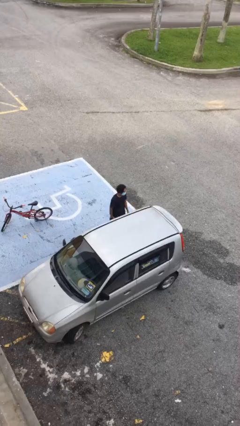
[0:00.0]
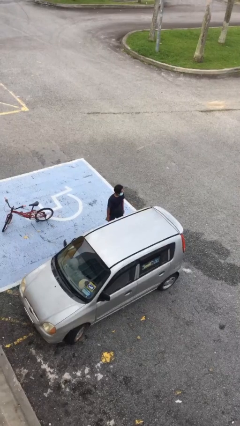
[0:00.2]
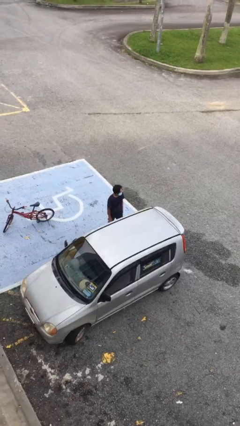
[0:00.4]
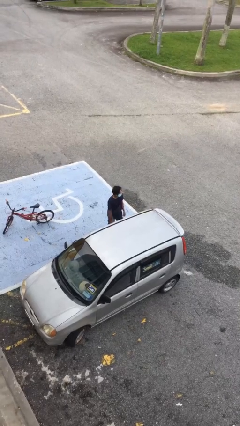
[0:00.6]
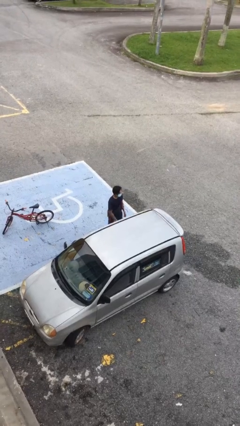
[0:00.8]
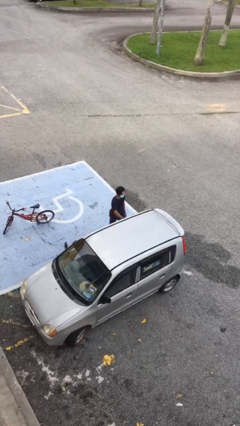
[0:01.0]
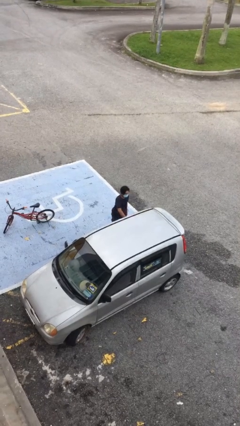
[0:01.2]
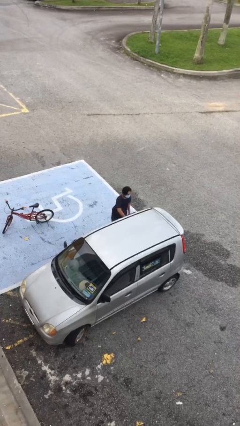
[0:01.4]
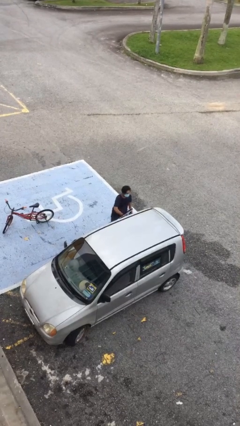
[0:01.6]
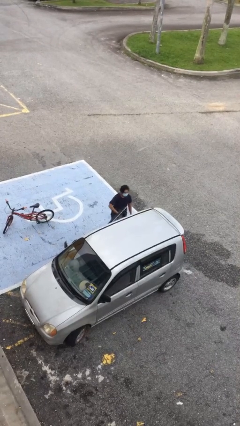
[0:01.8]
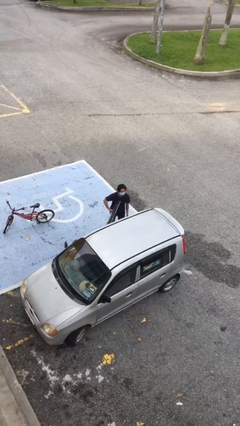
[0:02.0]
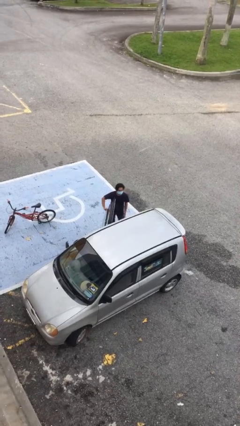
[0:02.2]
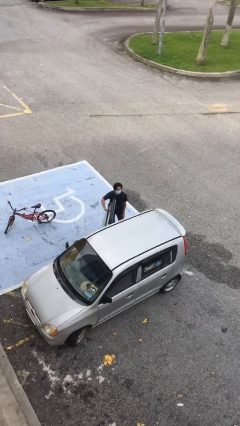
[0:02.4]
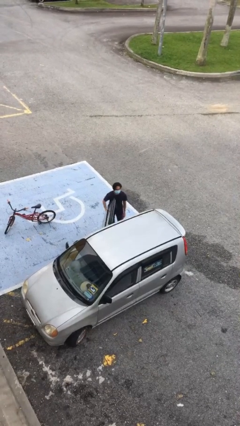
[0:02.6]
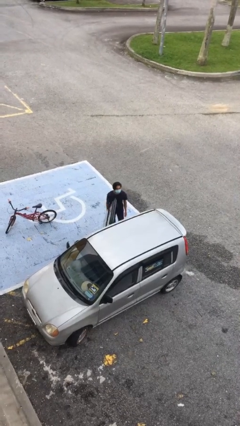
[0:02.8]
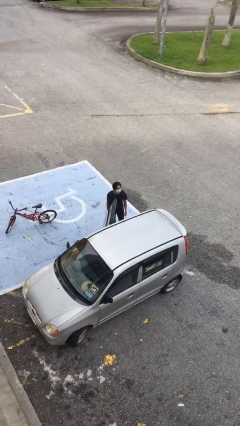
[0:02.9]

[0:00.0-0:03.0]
person opens car door

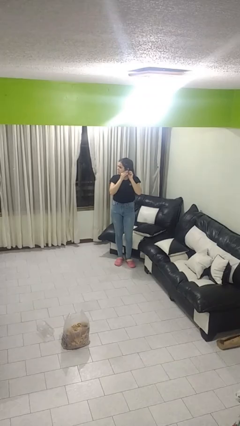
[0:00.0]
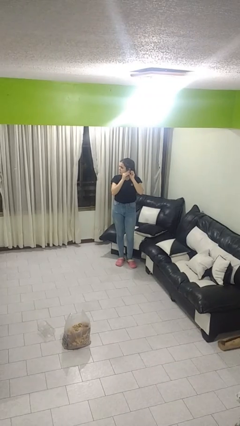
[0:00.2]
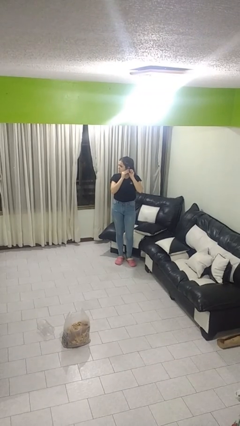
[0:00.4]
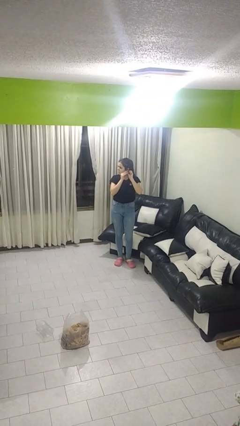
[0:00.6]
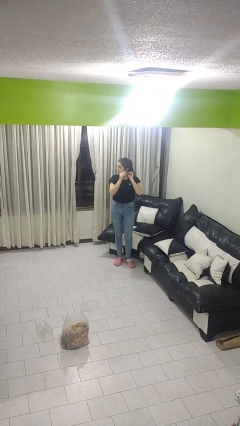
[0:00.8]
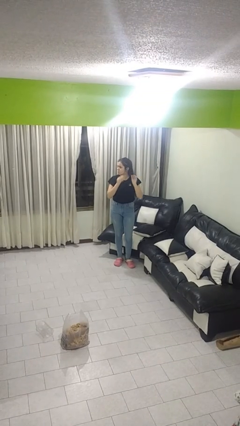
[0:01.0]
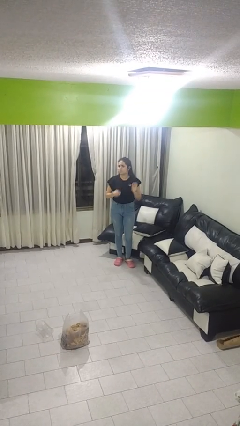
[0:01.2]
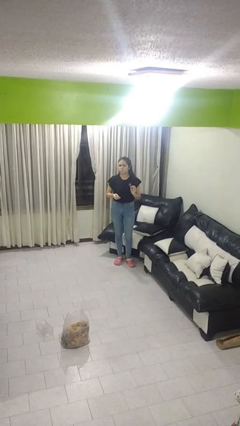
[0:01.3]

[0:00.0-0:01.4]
person takes off earrings

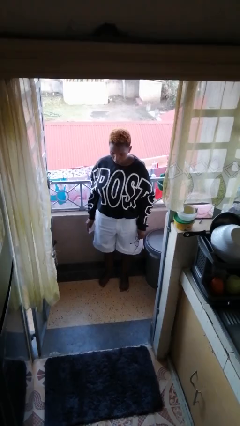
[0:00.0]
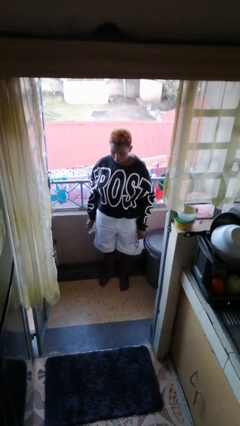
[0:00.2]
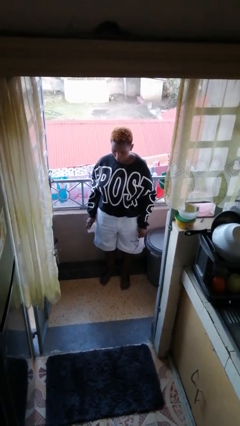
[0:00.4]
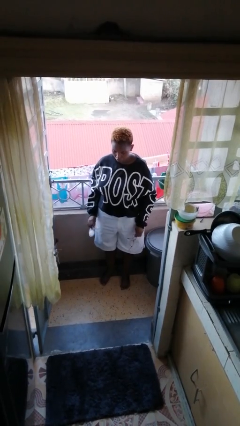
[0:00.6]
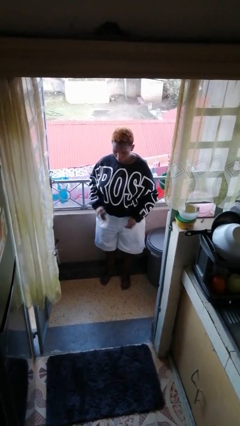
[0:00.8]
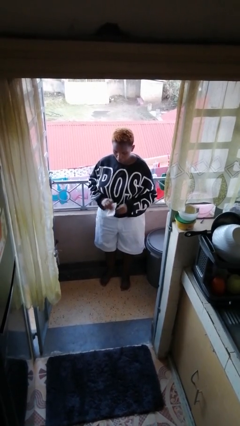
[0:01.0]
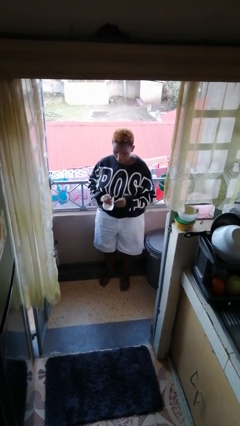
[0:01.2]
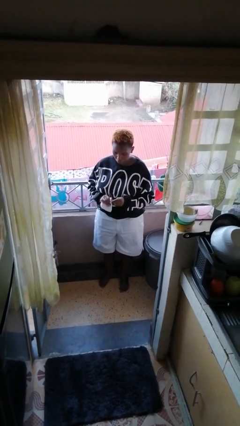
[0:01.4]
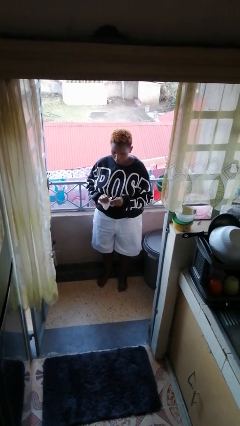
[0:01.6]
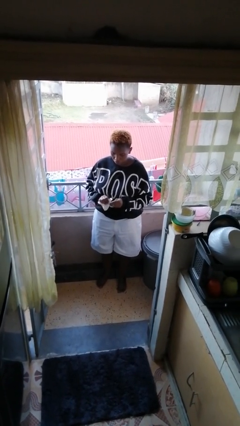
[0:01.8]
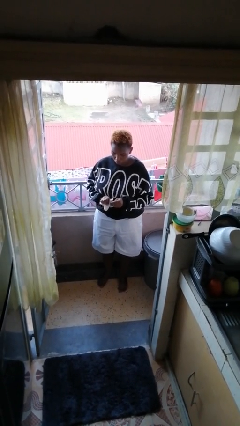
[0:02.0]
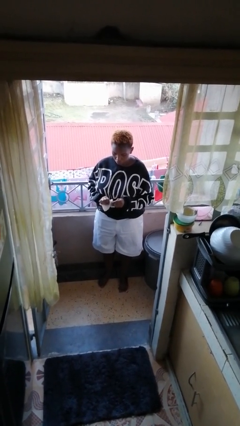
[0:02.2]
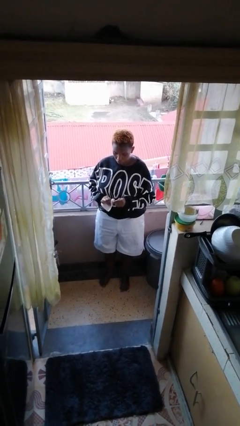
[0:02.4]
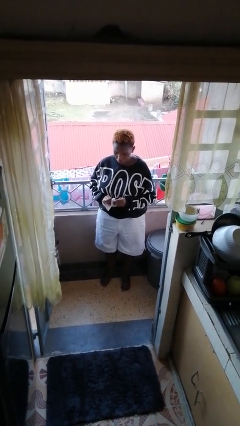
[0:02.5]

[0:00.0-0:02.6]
person cleans eyeglasses

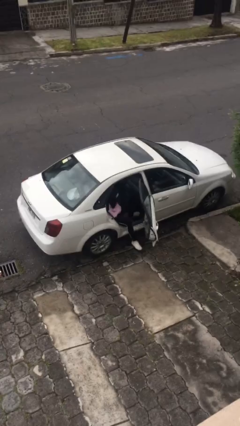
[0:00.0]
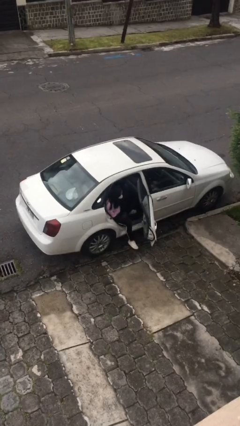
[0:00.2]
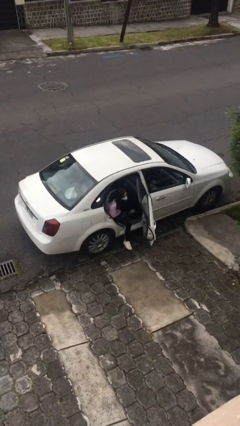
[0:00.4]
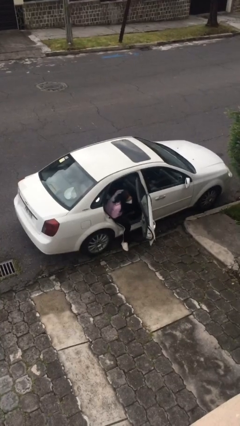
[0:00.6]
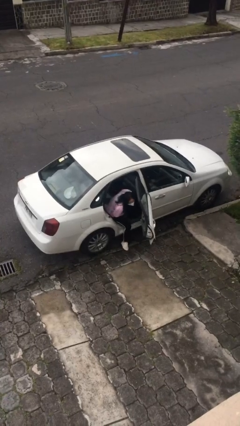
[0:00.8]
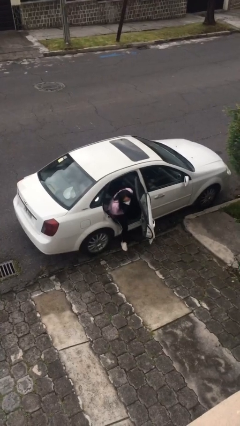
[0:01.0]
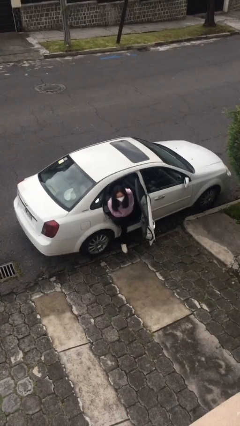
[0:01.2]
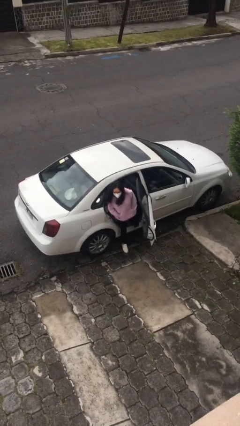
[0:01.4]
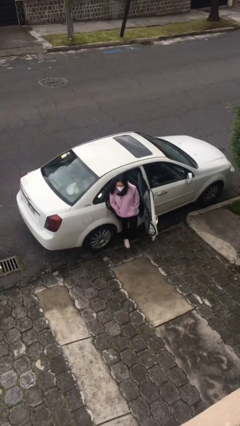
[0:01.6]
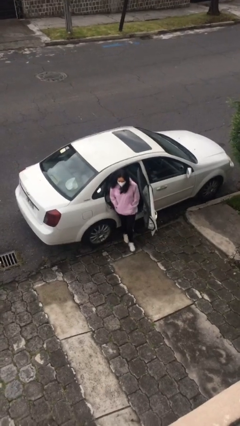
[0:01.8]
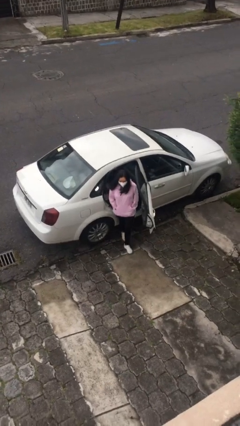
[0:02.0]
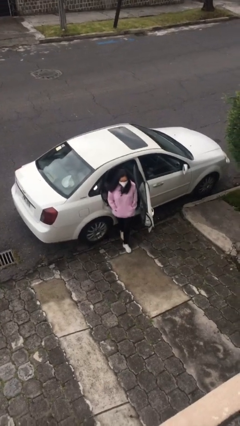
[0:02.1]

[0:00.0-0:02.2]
person exits car

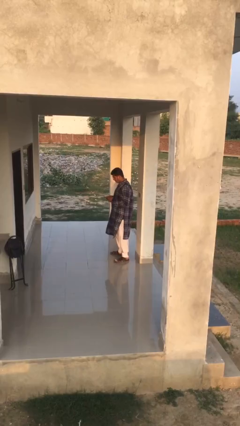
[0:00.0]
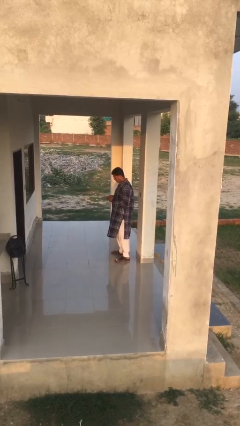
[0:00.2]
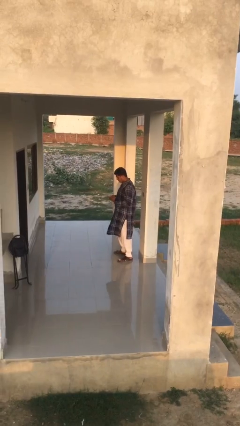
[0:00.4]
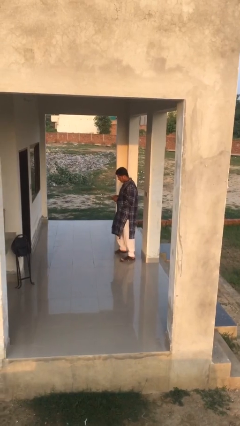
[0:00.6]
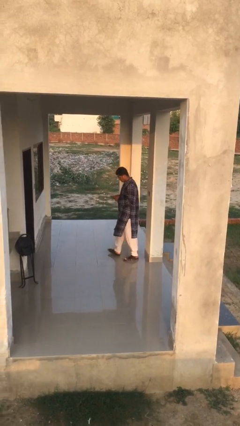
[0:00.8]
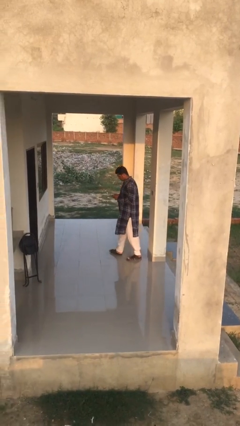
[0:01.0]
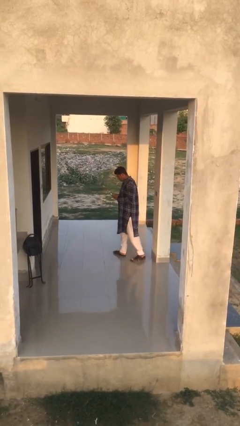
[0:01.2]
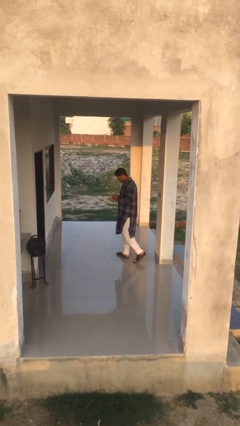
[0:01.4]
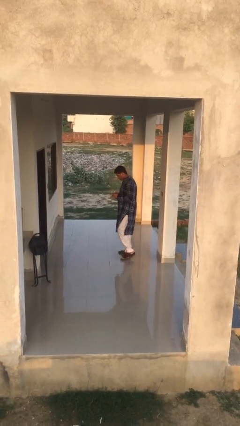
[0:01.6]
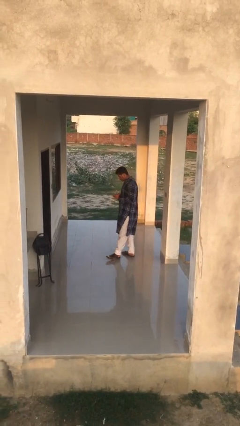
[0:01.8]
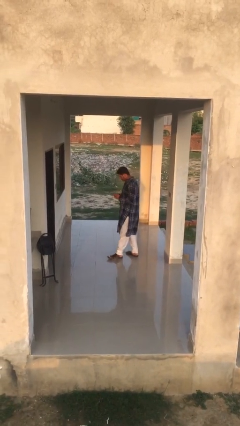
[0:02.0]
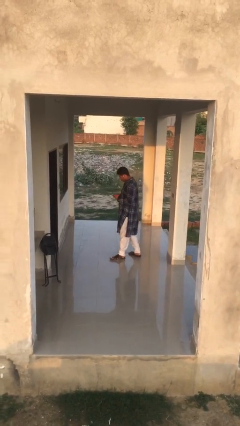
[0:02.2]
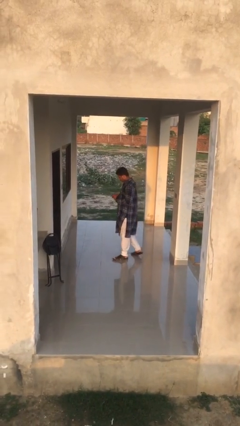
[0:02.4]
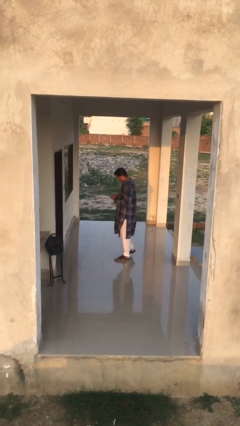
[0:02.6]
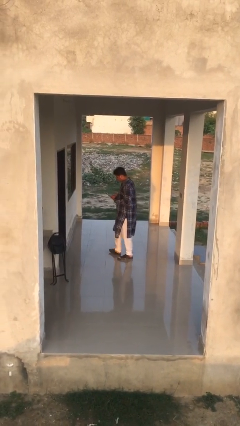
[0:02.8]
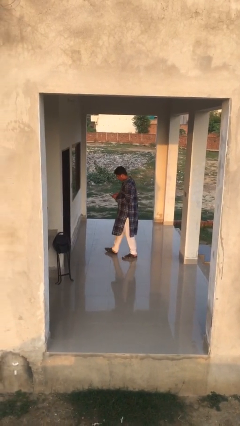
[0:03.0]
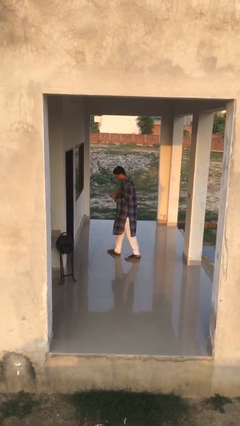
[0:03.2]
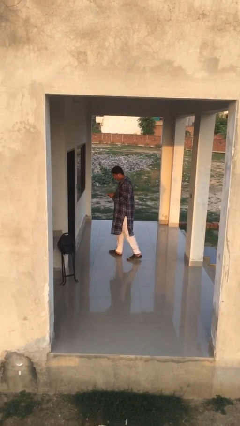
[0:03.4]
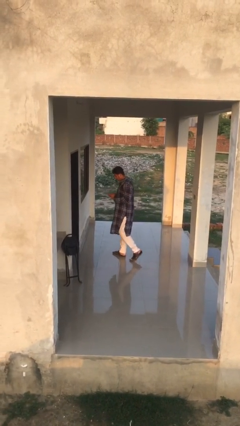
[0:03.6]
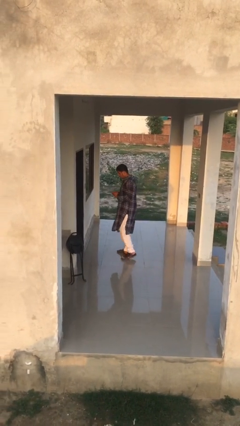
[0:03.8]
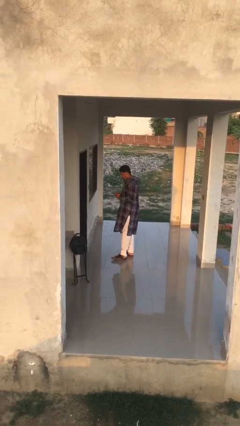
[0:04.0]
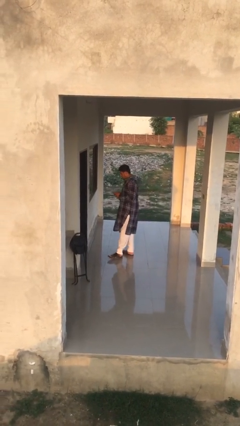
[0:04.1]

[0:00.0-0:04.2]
person texts on phone

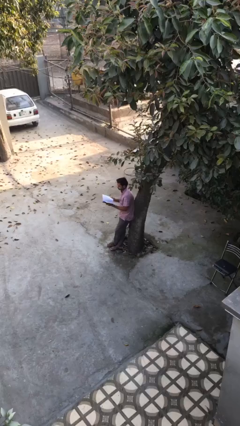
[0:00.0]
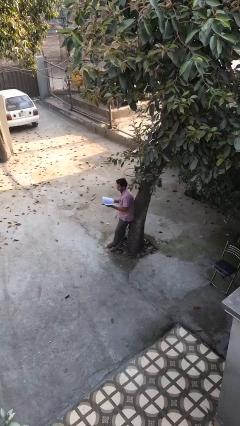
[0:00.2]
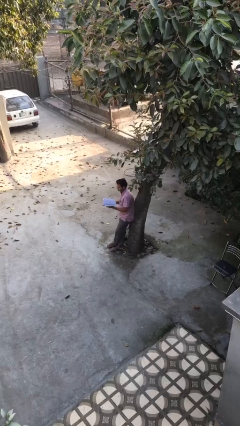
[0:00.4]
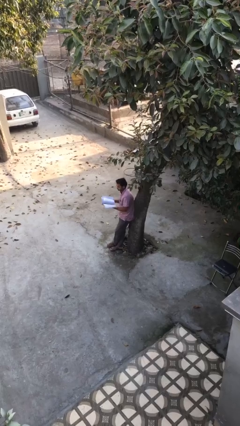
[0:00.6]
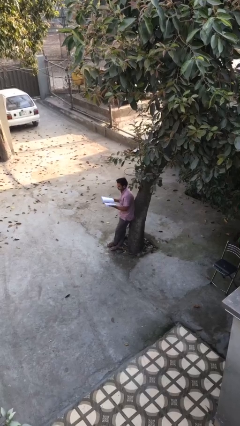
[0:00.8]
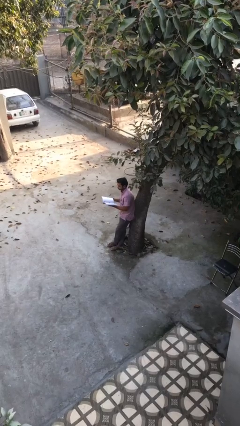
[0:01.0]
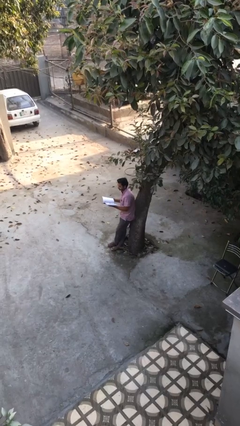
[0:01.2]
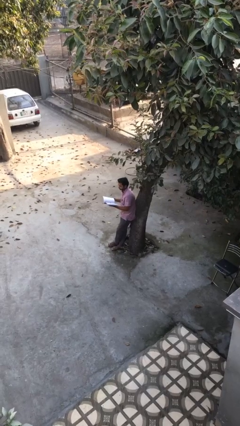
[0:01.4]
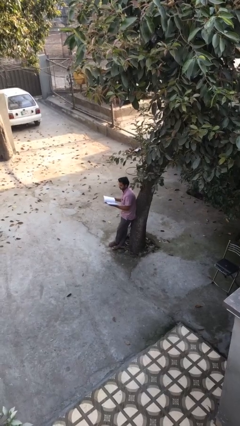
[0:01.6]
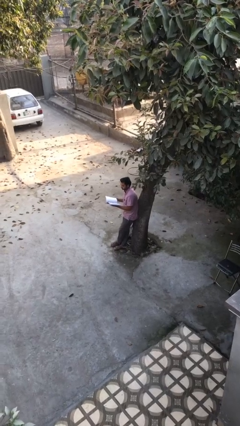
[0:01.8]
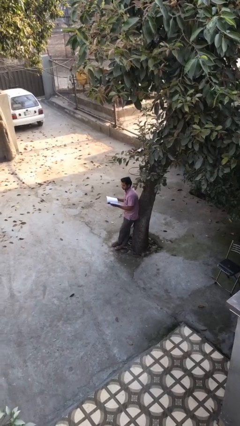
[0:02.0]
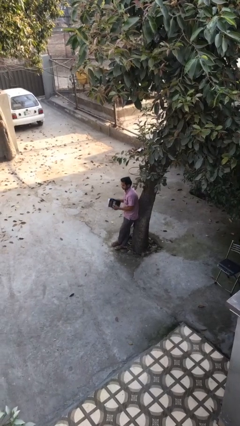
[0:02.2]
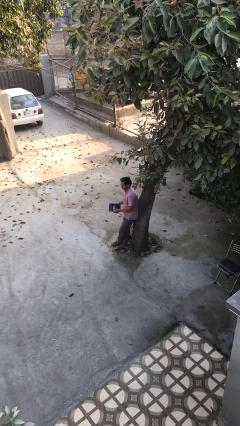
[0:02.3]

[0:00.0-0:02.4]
person reads document

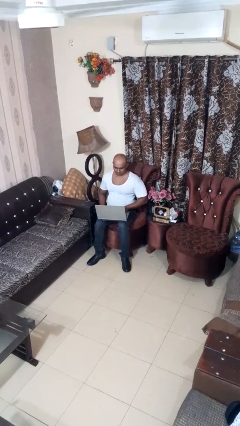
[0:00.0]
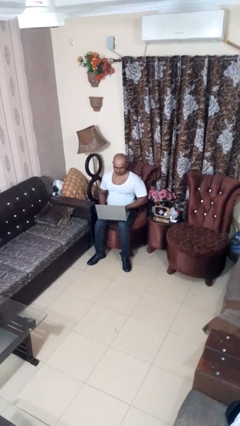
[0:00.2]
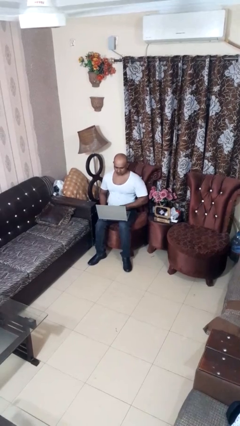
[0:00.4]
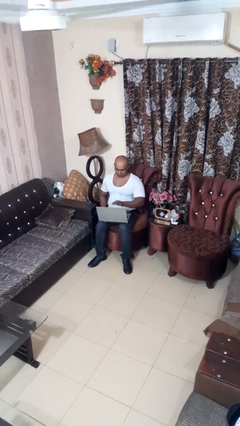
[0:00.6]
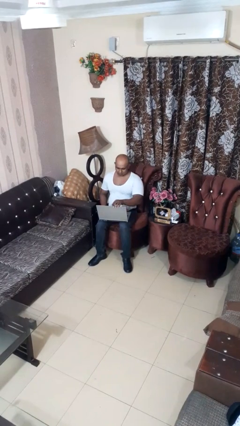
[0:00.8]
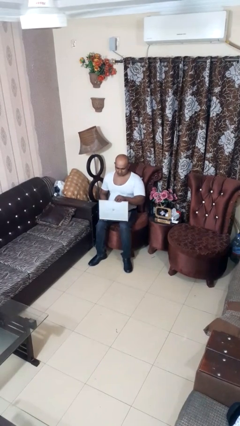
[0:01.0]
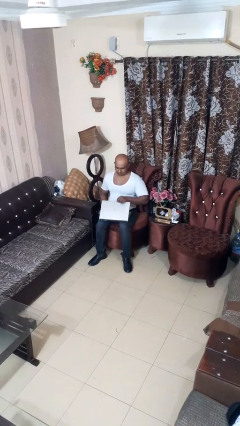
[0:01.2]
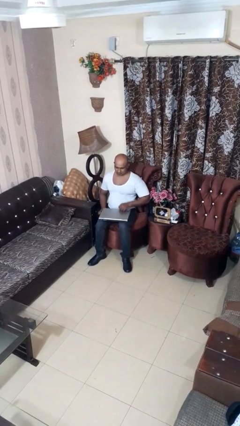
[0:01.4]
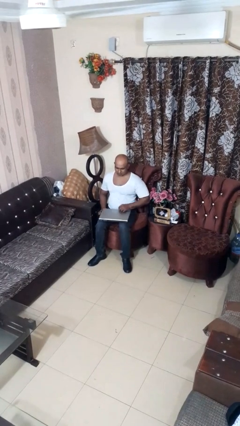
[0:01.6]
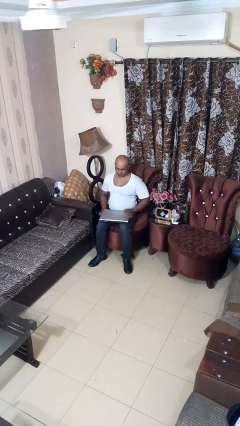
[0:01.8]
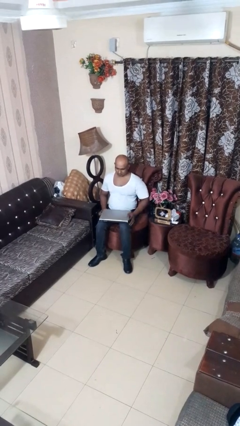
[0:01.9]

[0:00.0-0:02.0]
person closes laptop
